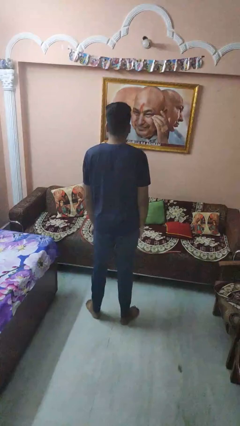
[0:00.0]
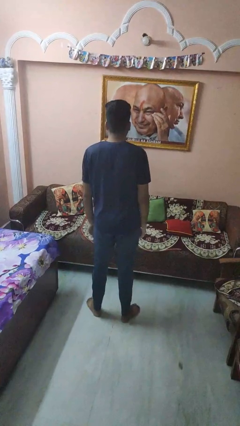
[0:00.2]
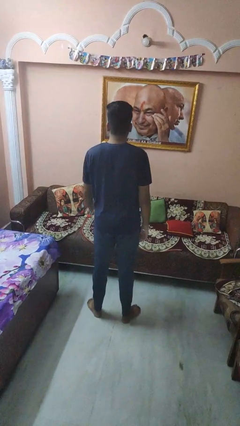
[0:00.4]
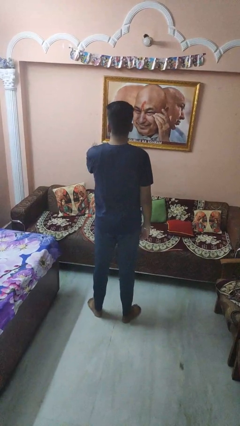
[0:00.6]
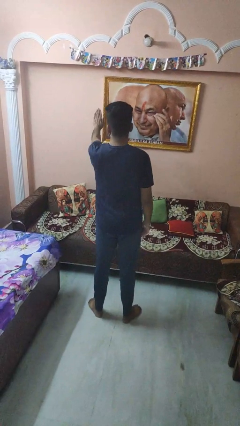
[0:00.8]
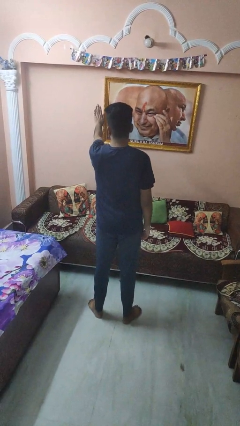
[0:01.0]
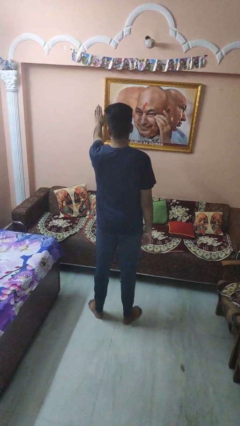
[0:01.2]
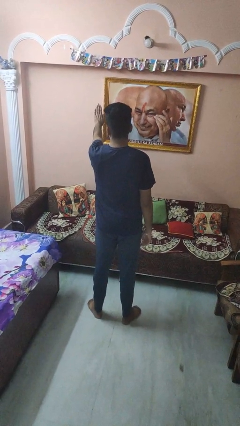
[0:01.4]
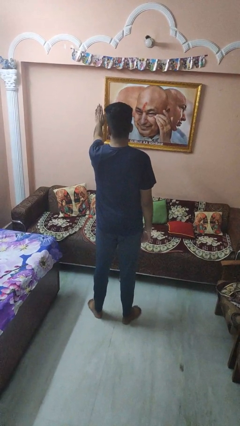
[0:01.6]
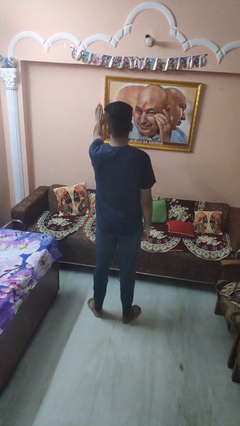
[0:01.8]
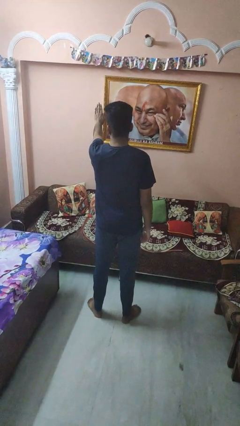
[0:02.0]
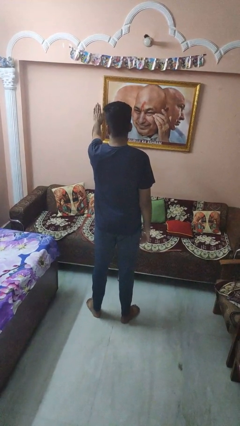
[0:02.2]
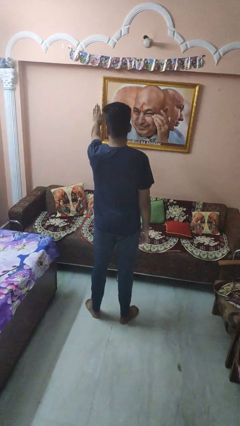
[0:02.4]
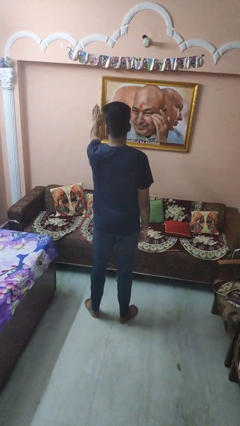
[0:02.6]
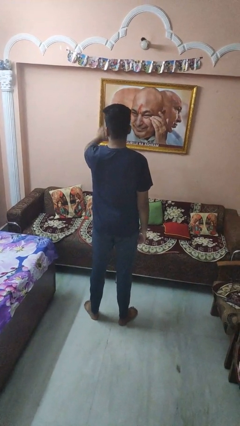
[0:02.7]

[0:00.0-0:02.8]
person gestures stop

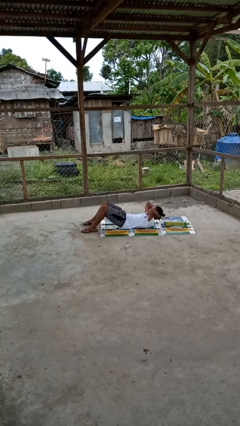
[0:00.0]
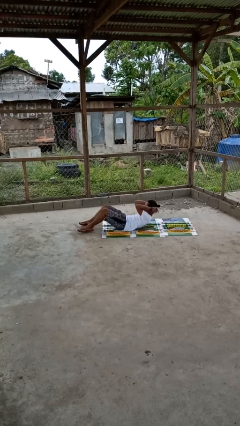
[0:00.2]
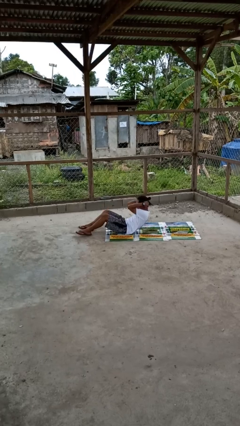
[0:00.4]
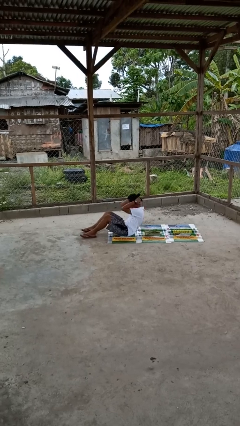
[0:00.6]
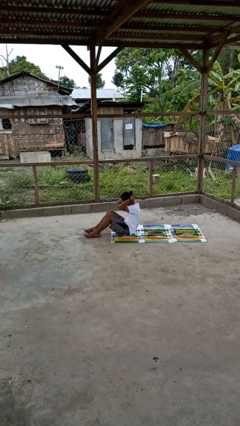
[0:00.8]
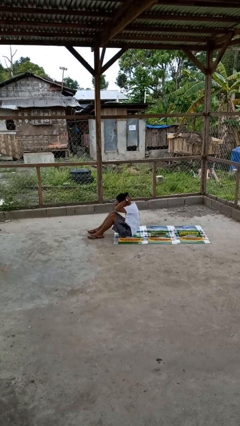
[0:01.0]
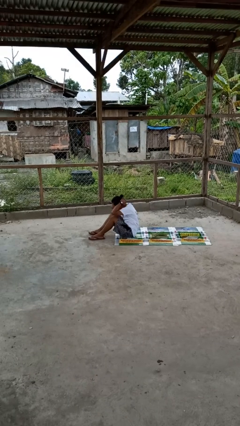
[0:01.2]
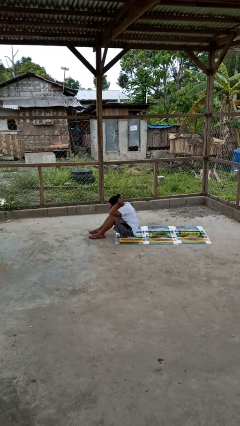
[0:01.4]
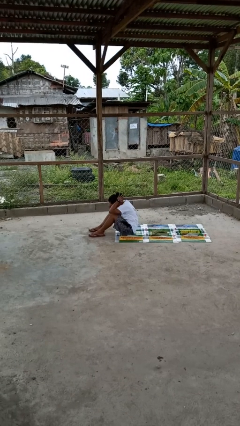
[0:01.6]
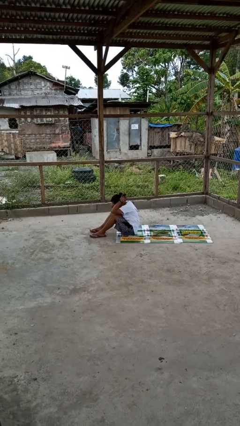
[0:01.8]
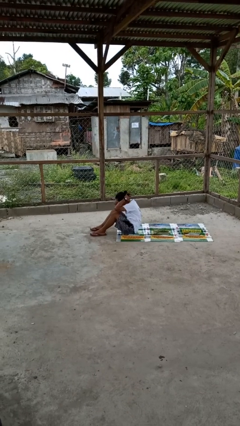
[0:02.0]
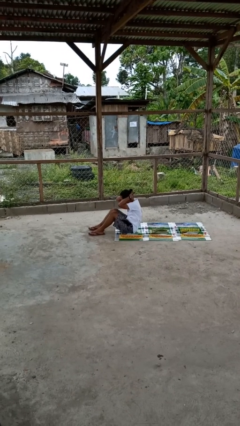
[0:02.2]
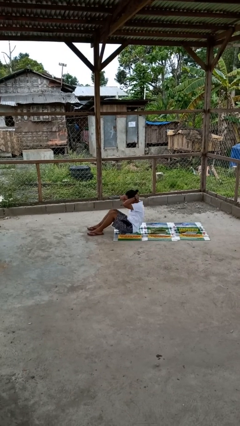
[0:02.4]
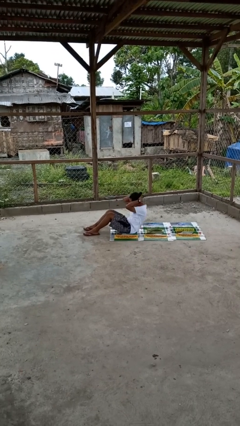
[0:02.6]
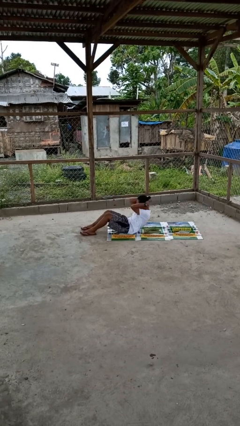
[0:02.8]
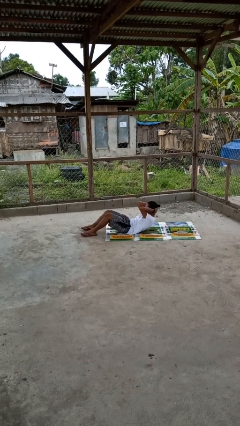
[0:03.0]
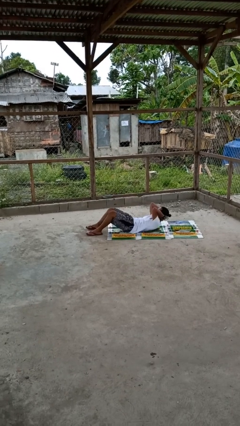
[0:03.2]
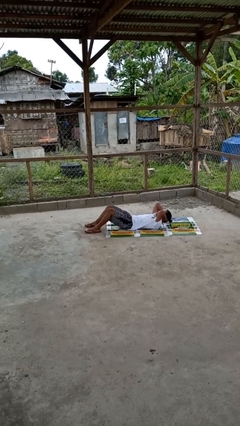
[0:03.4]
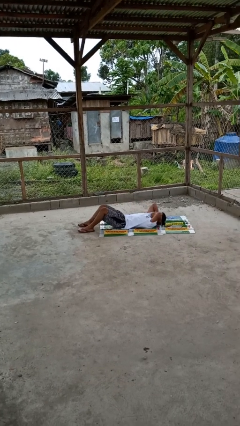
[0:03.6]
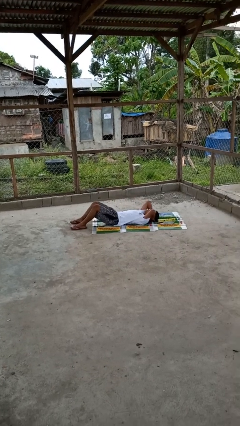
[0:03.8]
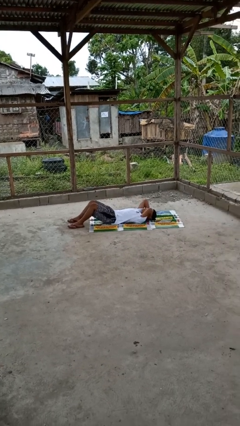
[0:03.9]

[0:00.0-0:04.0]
person exercises with situp

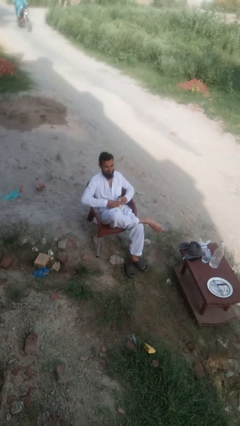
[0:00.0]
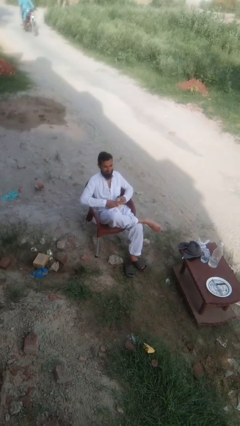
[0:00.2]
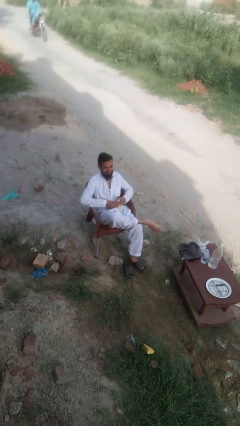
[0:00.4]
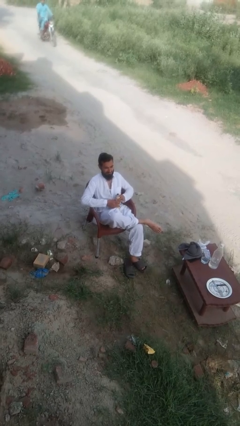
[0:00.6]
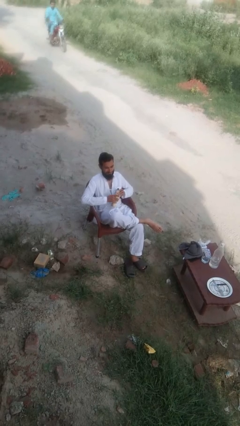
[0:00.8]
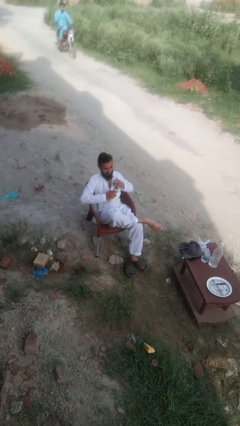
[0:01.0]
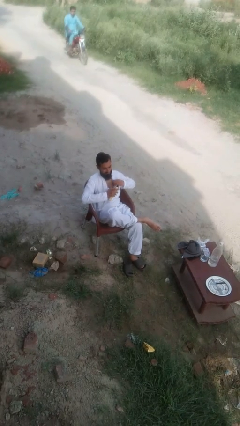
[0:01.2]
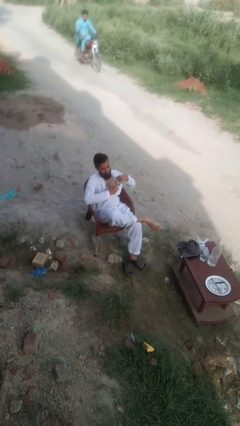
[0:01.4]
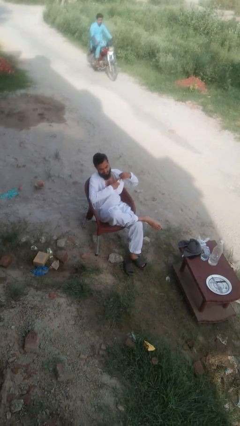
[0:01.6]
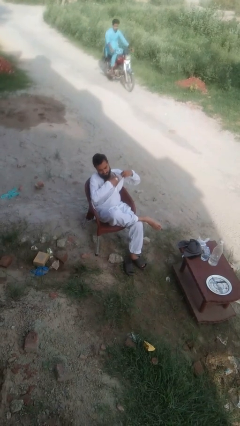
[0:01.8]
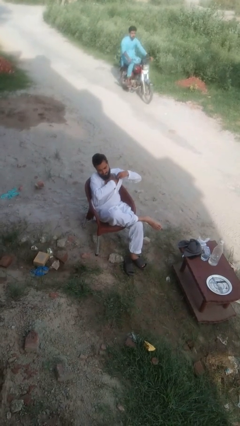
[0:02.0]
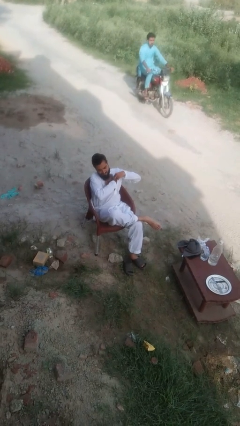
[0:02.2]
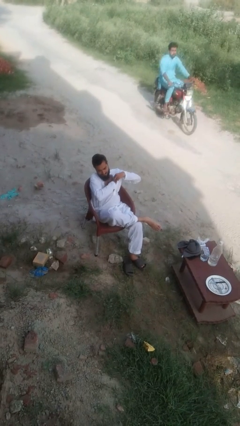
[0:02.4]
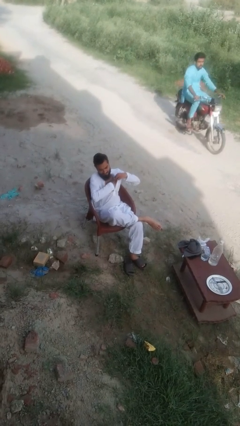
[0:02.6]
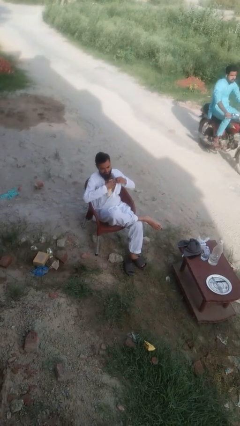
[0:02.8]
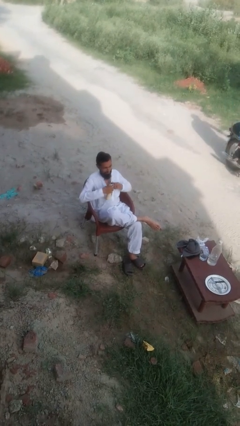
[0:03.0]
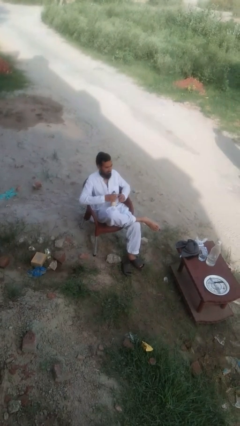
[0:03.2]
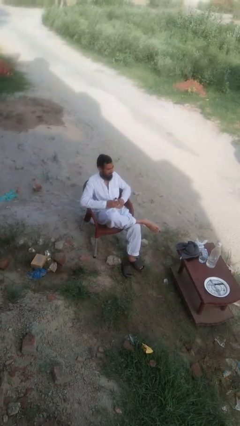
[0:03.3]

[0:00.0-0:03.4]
person applies deodorant

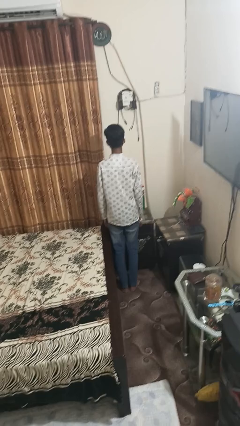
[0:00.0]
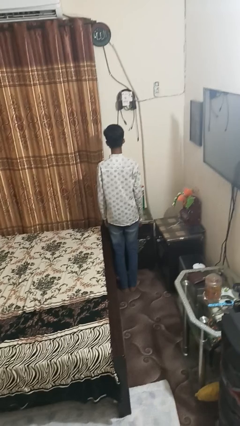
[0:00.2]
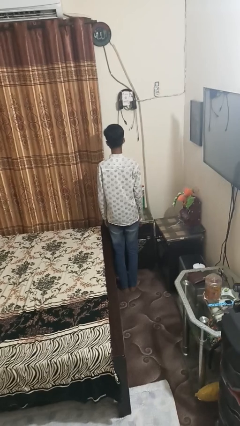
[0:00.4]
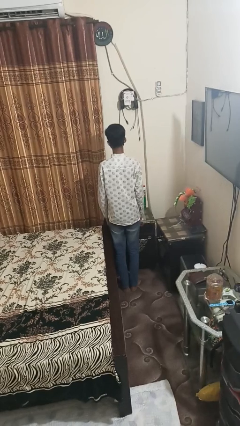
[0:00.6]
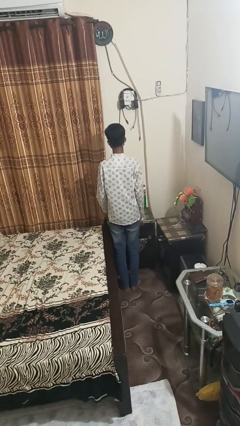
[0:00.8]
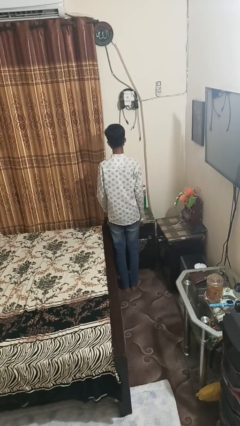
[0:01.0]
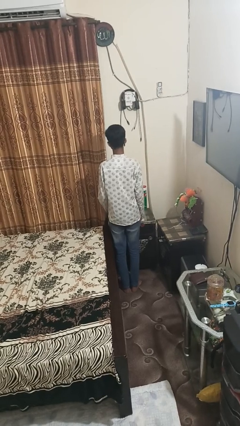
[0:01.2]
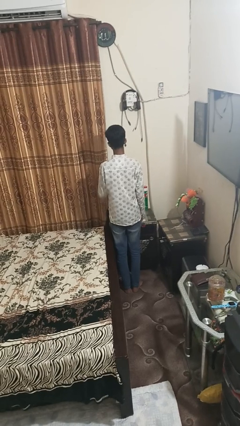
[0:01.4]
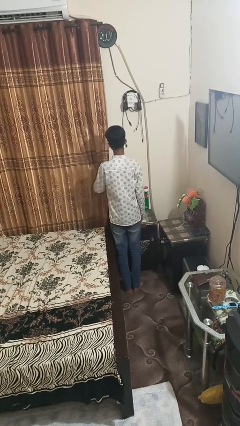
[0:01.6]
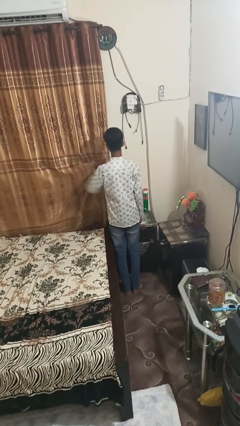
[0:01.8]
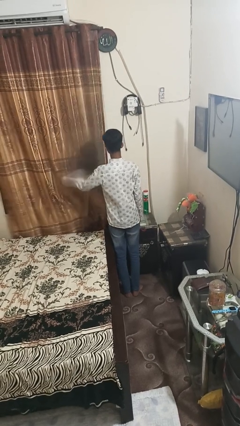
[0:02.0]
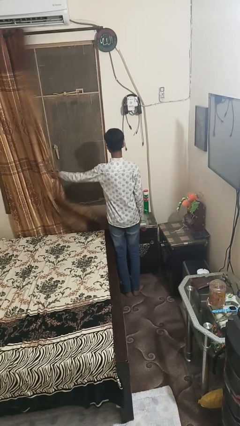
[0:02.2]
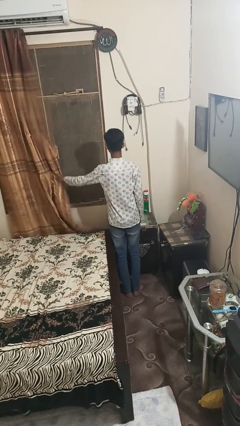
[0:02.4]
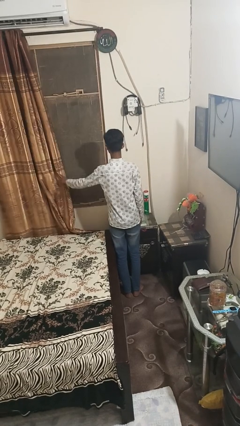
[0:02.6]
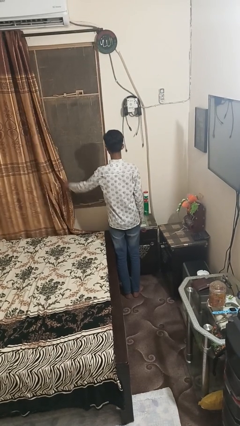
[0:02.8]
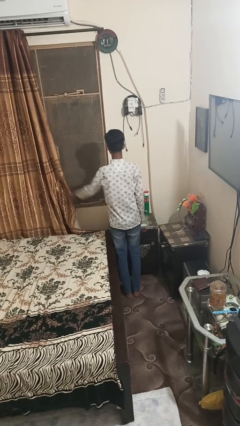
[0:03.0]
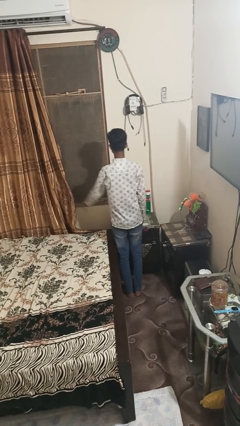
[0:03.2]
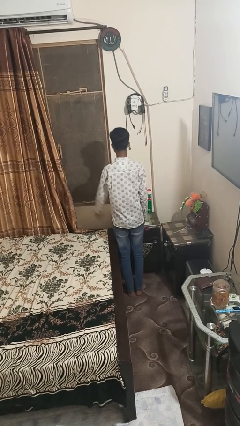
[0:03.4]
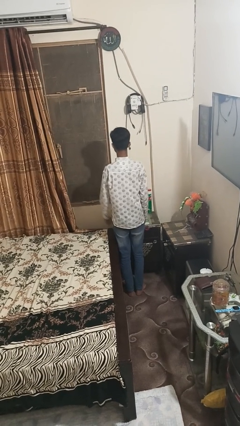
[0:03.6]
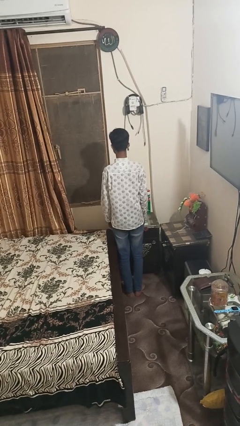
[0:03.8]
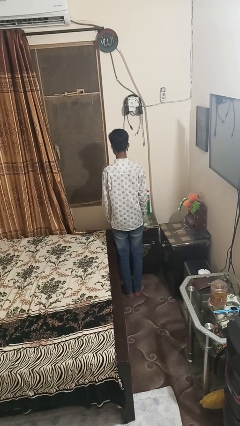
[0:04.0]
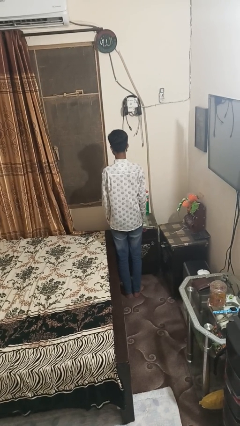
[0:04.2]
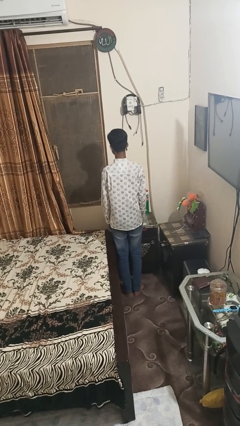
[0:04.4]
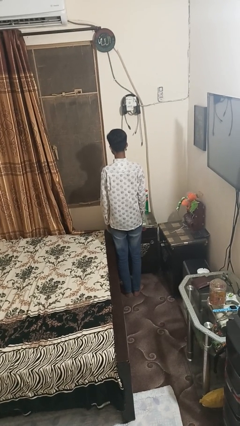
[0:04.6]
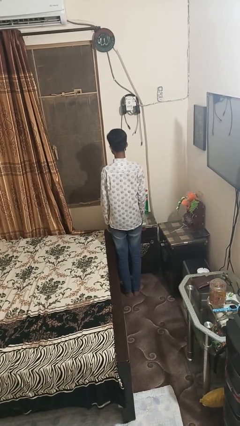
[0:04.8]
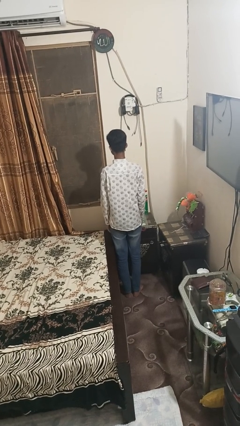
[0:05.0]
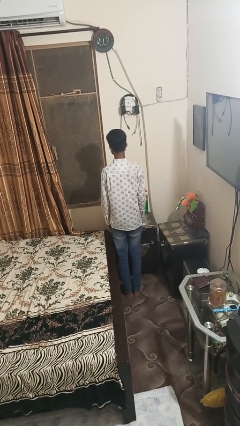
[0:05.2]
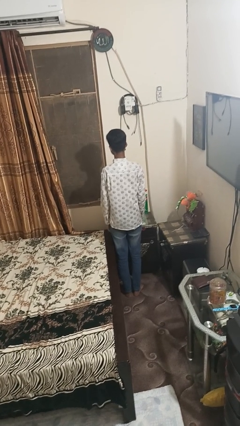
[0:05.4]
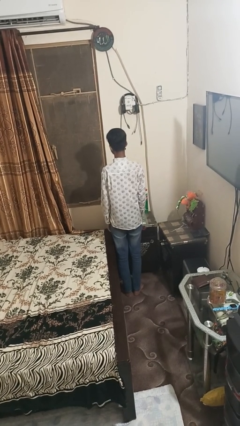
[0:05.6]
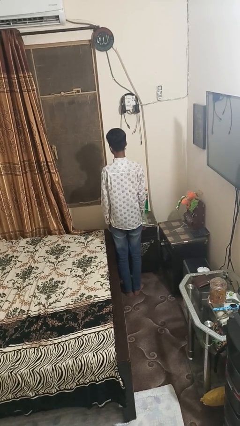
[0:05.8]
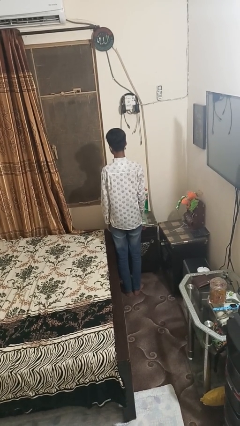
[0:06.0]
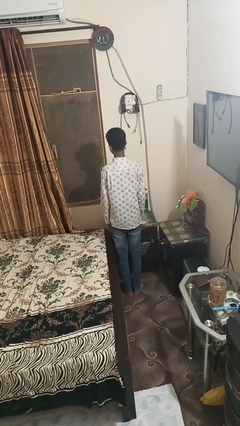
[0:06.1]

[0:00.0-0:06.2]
person opens curtains
